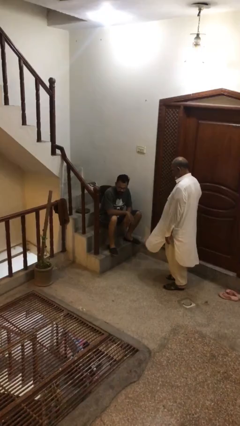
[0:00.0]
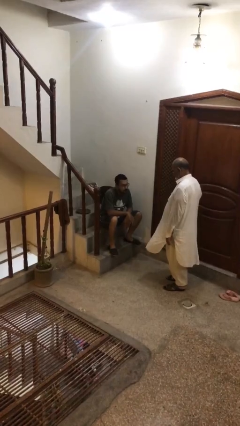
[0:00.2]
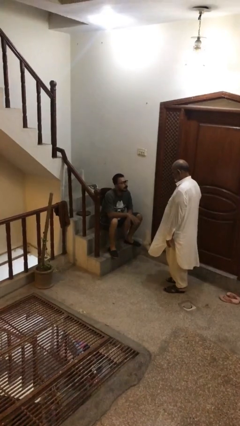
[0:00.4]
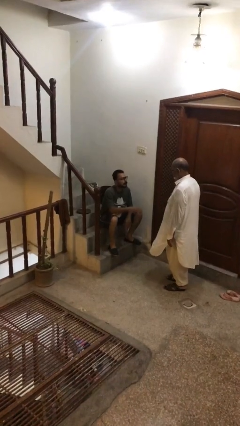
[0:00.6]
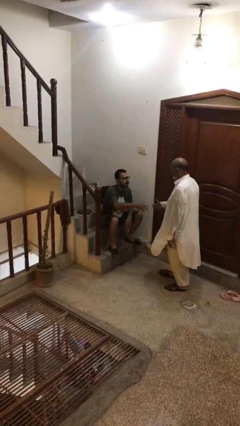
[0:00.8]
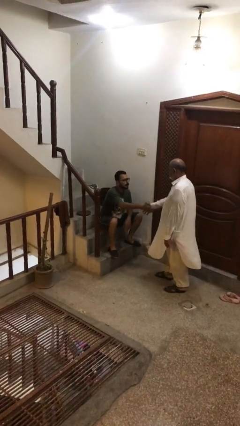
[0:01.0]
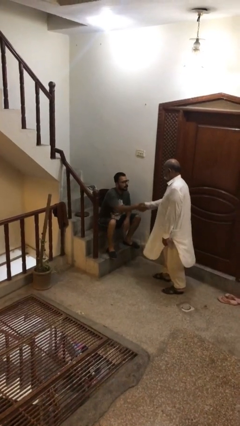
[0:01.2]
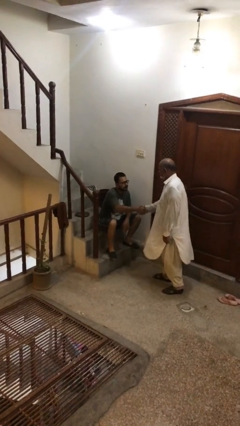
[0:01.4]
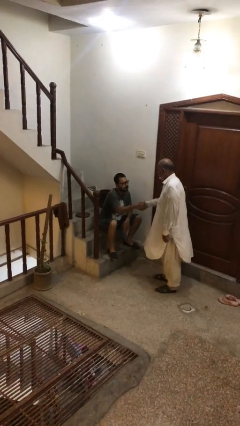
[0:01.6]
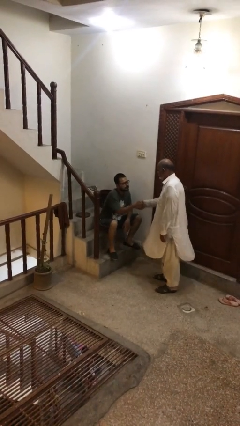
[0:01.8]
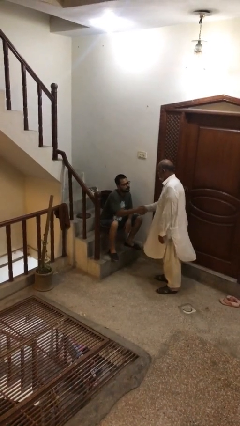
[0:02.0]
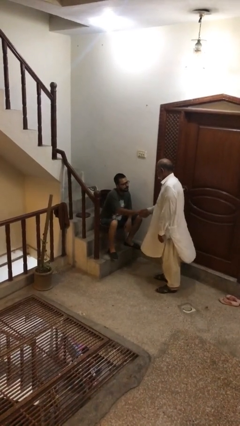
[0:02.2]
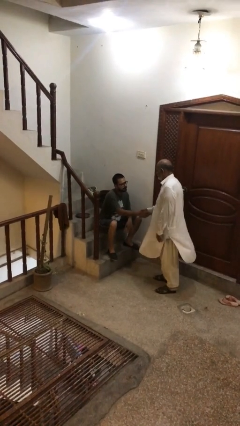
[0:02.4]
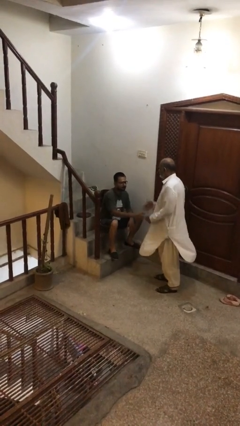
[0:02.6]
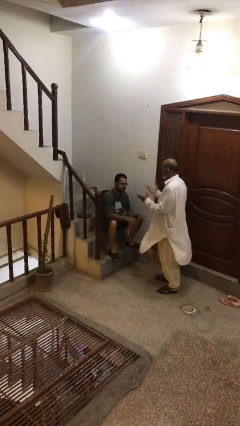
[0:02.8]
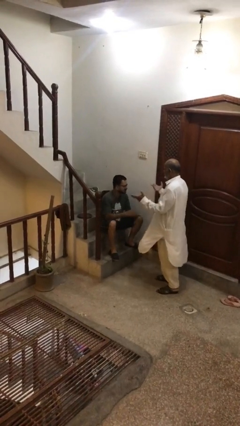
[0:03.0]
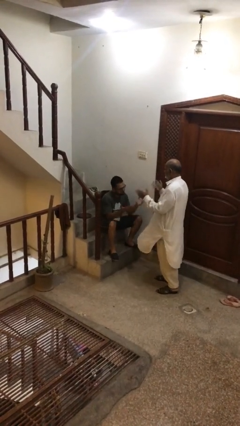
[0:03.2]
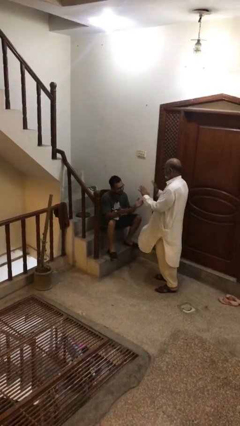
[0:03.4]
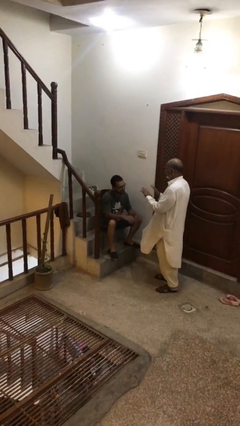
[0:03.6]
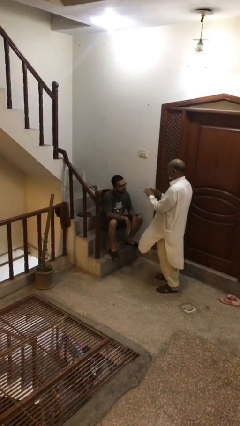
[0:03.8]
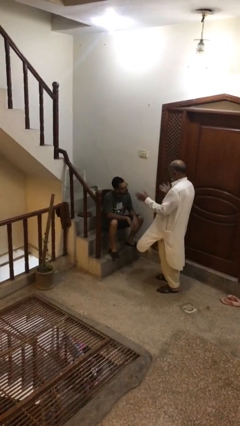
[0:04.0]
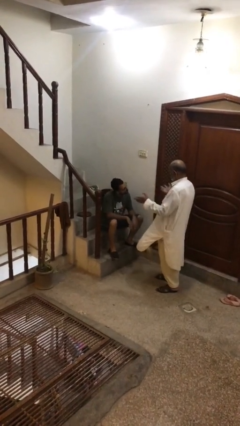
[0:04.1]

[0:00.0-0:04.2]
person shakes hand

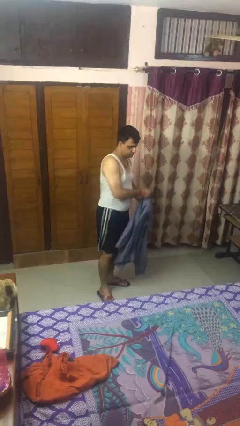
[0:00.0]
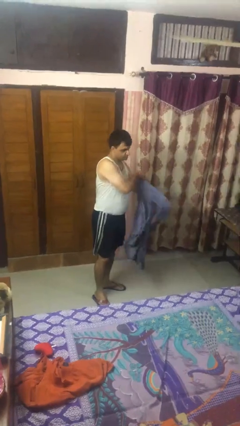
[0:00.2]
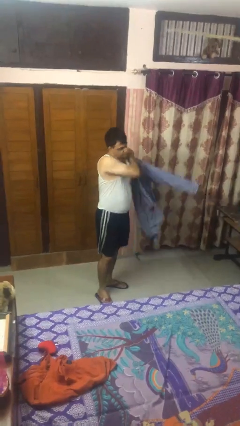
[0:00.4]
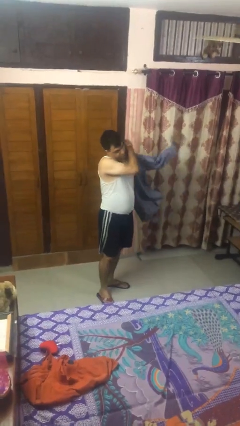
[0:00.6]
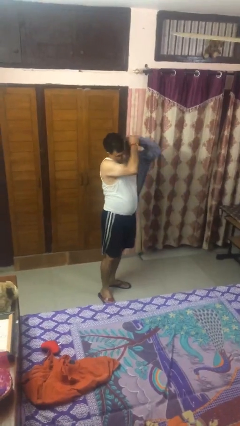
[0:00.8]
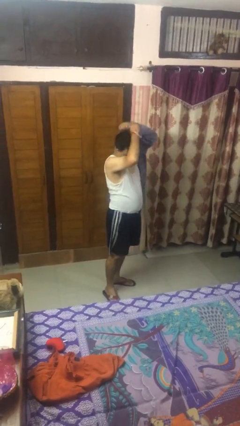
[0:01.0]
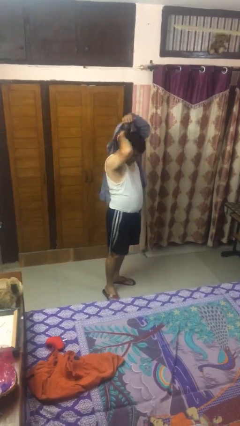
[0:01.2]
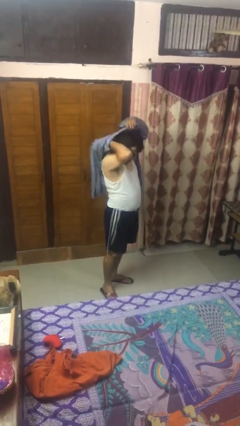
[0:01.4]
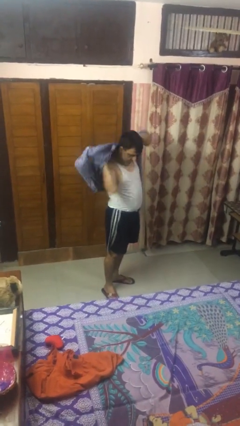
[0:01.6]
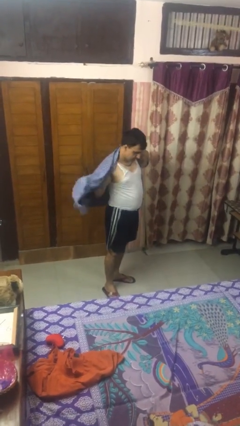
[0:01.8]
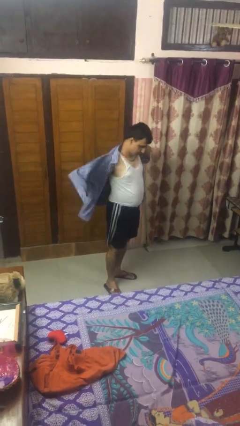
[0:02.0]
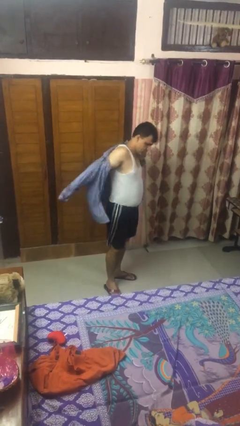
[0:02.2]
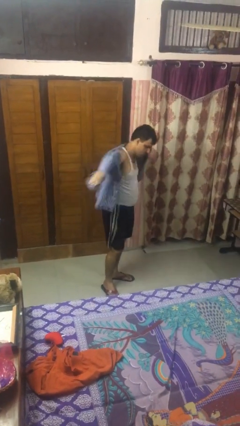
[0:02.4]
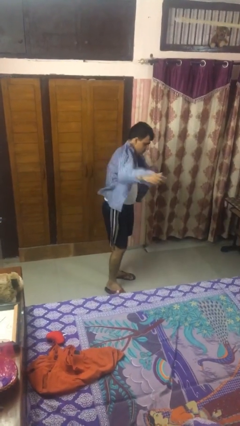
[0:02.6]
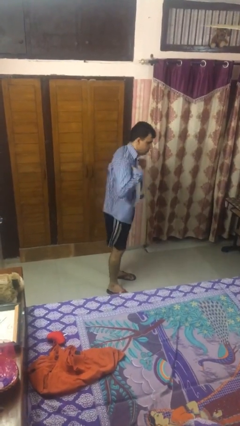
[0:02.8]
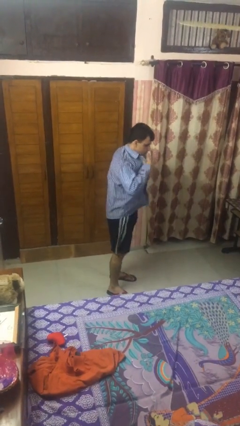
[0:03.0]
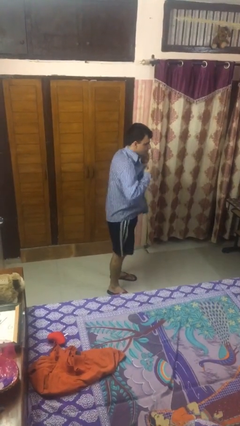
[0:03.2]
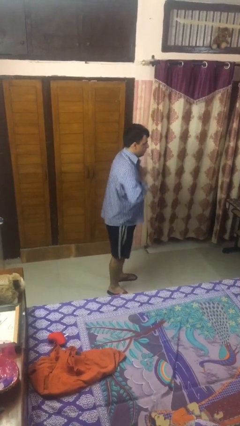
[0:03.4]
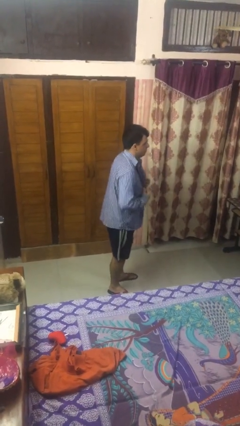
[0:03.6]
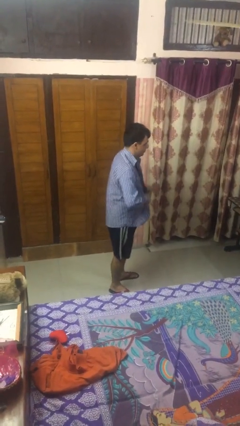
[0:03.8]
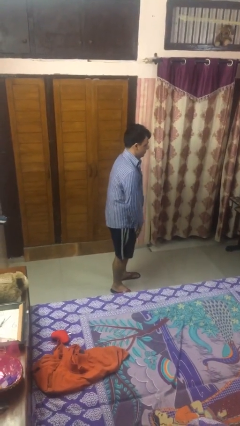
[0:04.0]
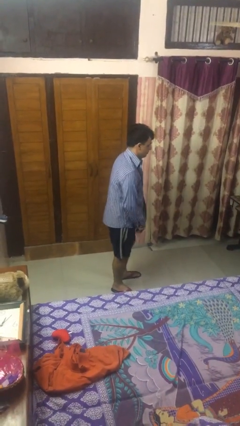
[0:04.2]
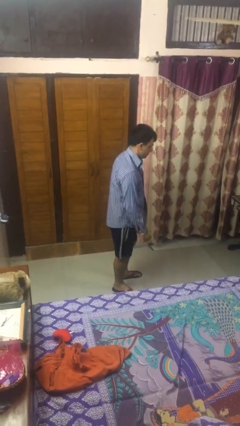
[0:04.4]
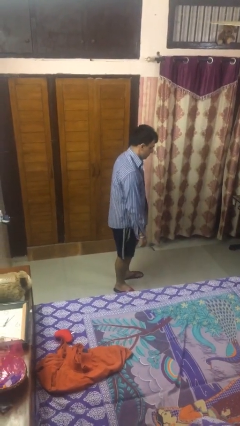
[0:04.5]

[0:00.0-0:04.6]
person puts on shirt

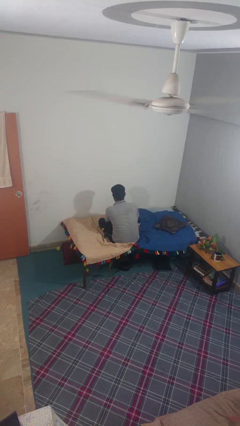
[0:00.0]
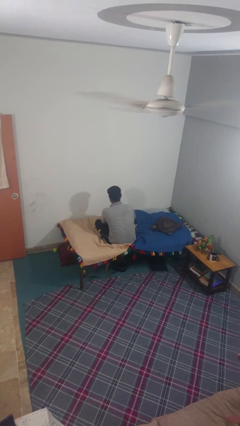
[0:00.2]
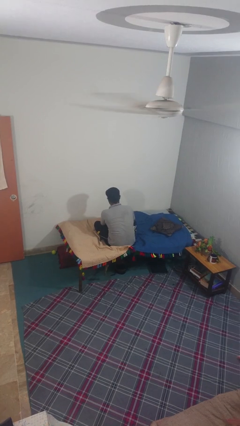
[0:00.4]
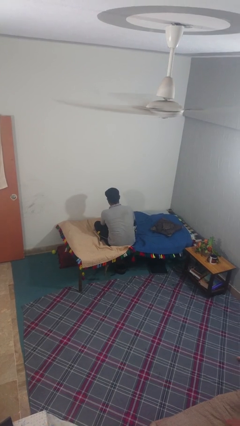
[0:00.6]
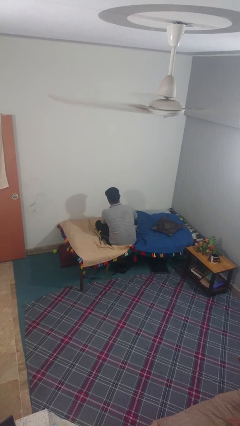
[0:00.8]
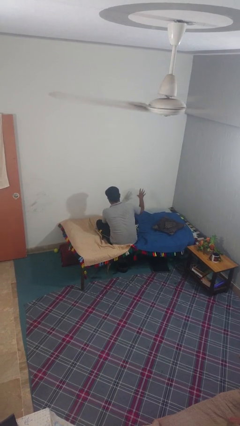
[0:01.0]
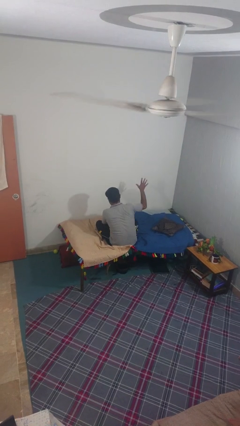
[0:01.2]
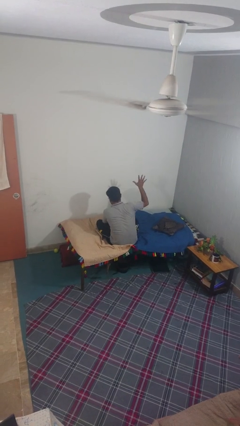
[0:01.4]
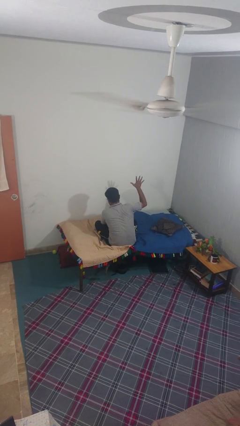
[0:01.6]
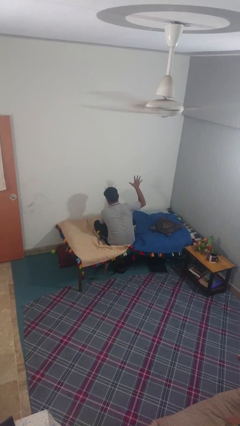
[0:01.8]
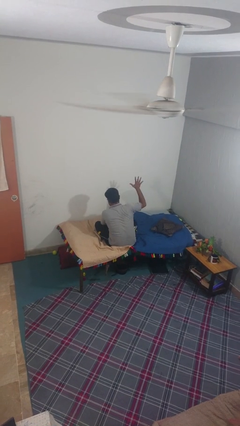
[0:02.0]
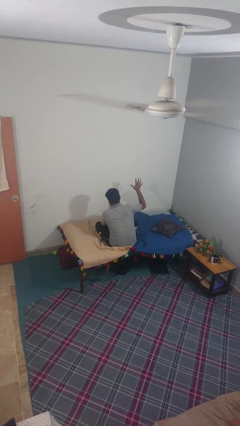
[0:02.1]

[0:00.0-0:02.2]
person gestures number five

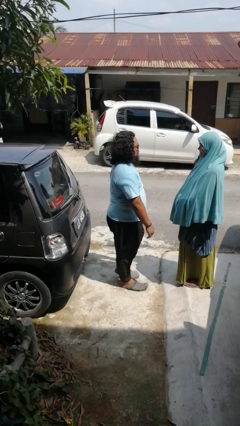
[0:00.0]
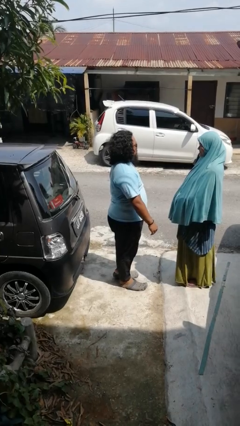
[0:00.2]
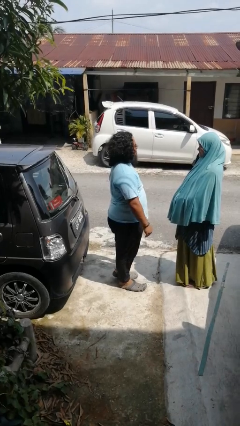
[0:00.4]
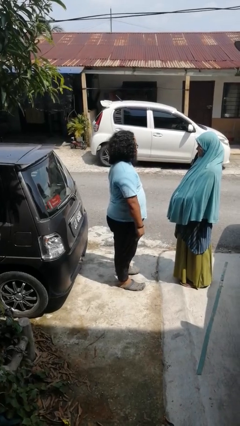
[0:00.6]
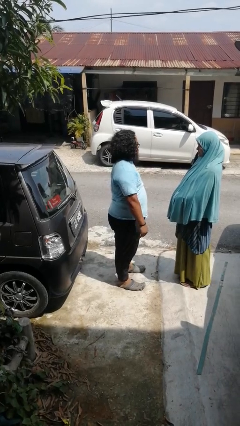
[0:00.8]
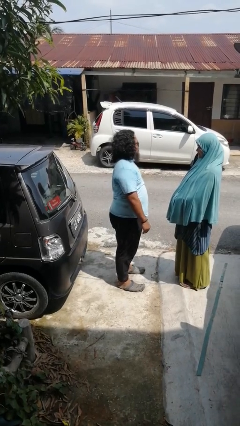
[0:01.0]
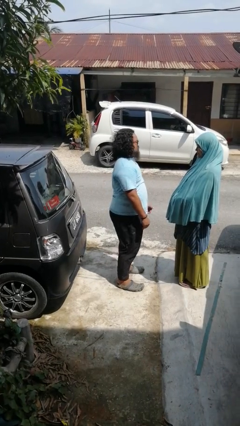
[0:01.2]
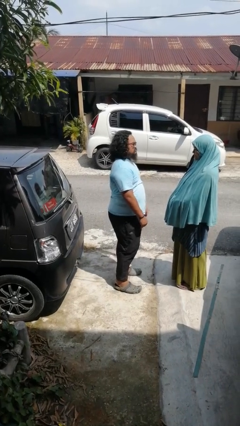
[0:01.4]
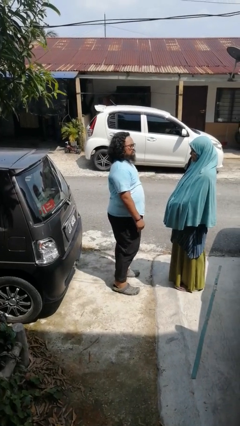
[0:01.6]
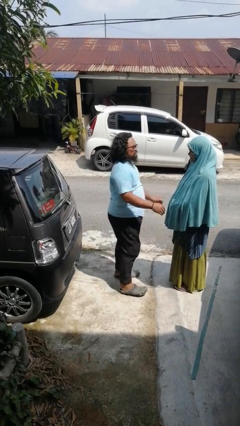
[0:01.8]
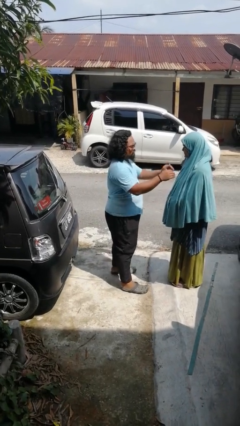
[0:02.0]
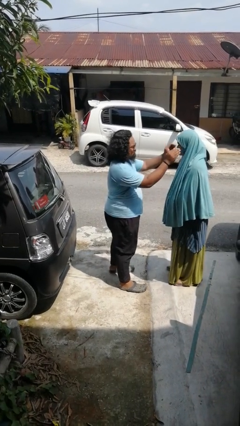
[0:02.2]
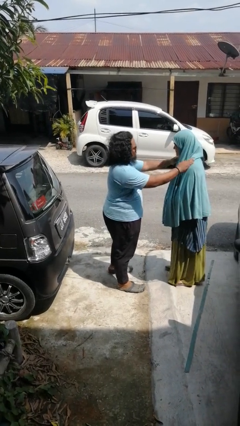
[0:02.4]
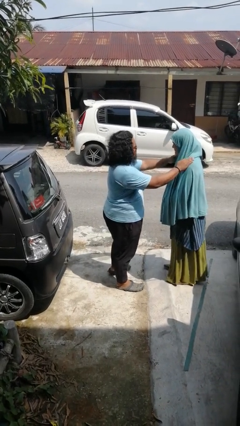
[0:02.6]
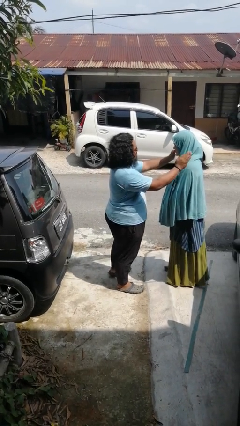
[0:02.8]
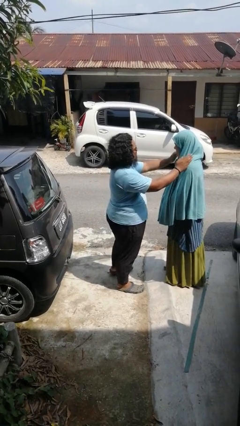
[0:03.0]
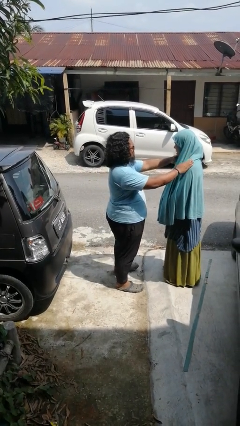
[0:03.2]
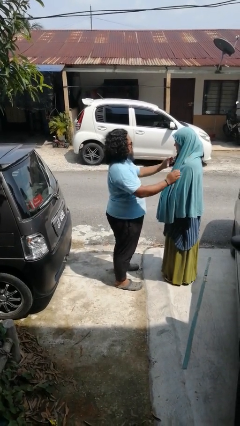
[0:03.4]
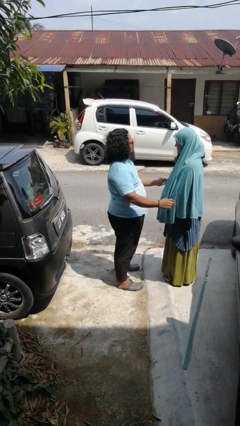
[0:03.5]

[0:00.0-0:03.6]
person pounds shoulders of person

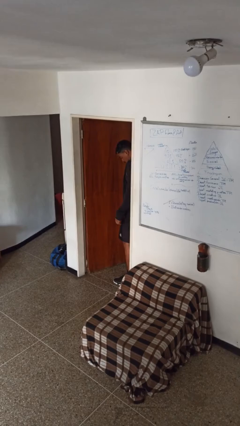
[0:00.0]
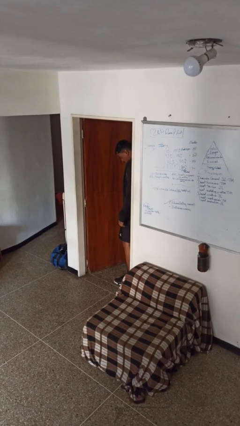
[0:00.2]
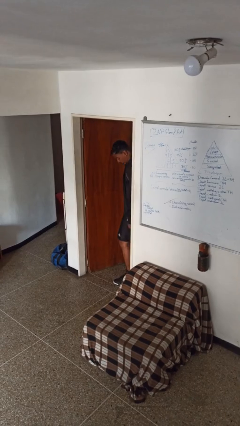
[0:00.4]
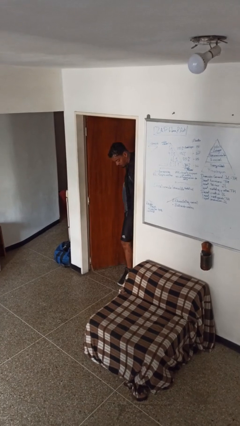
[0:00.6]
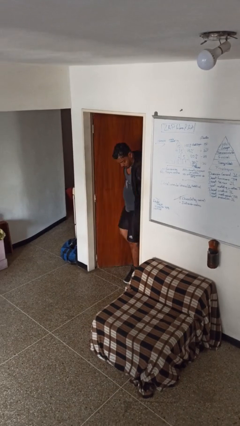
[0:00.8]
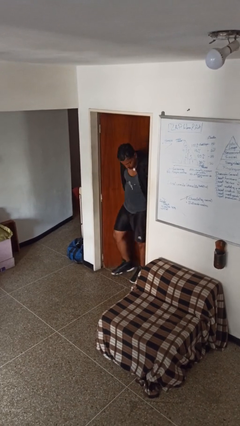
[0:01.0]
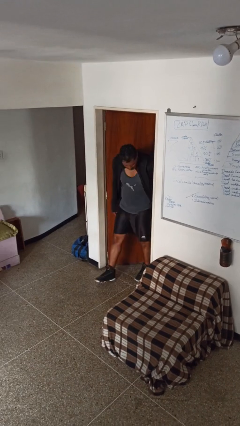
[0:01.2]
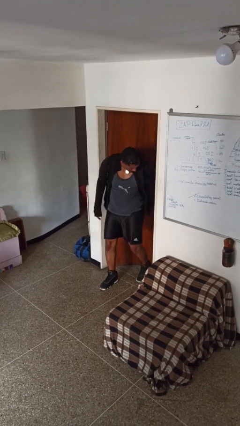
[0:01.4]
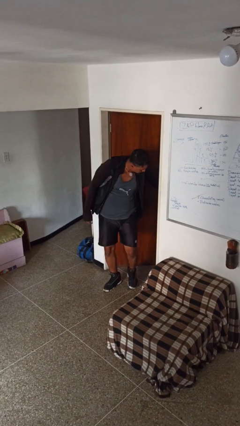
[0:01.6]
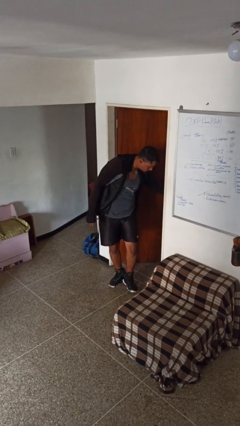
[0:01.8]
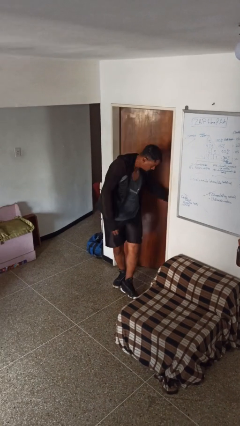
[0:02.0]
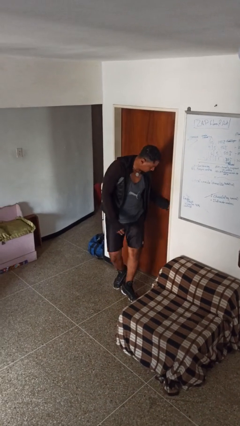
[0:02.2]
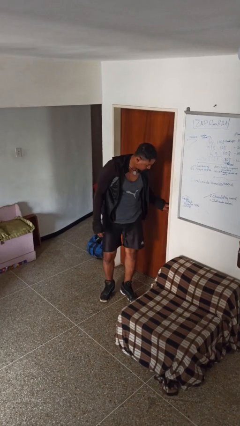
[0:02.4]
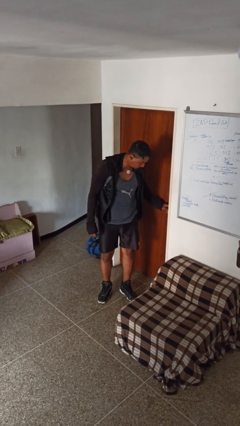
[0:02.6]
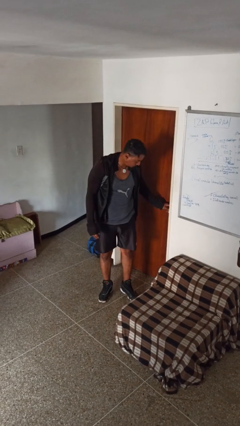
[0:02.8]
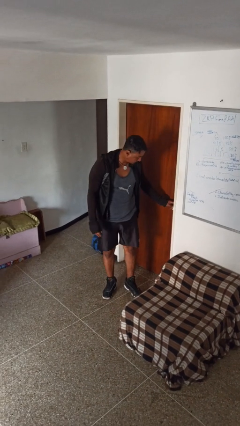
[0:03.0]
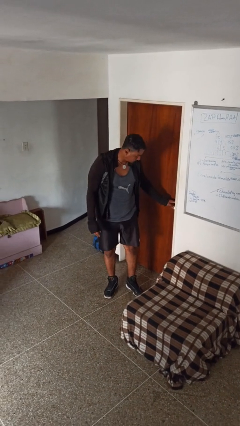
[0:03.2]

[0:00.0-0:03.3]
person closes facility door
